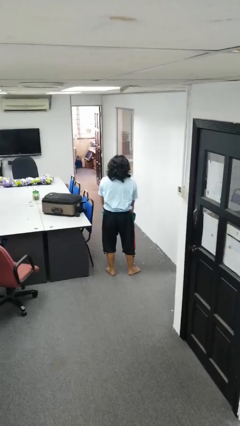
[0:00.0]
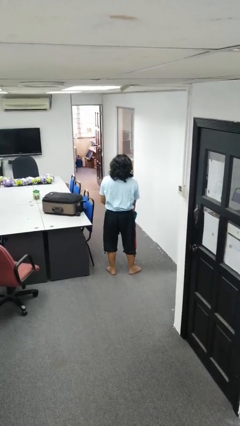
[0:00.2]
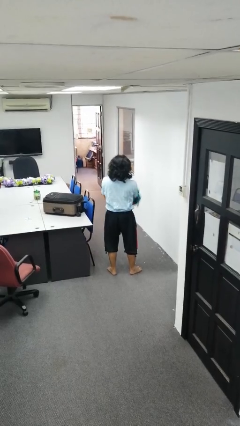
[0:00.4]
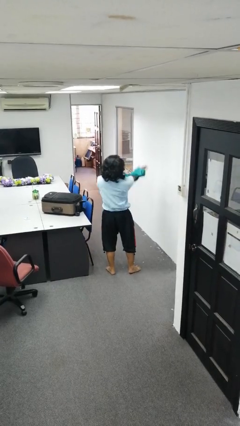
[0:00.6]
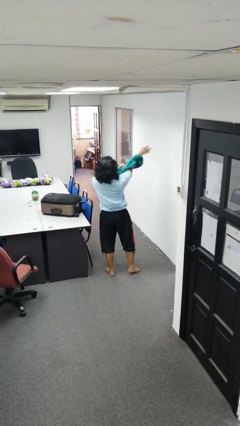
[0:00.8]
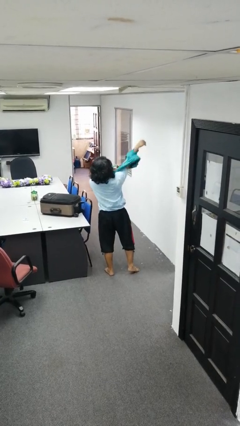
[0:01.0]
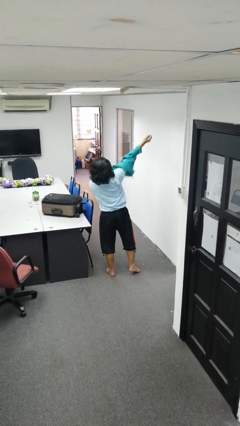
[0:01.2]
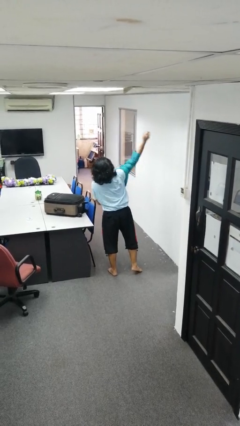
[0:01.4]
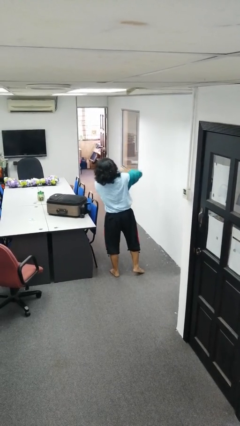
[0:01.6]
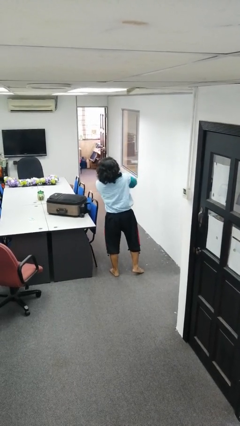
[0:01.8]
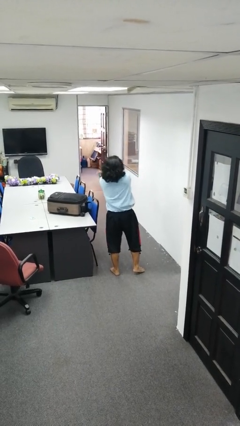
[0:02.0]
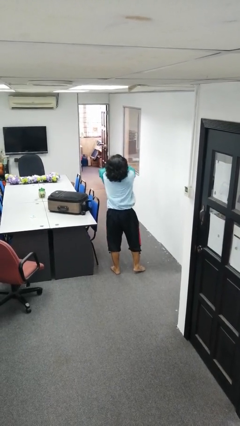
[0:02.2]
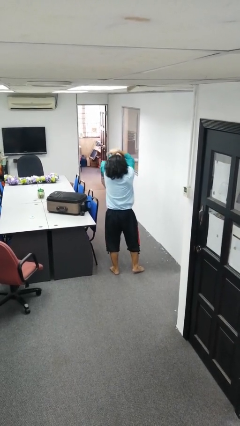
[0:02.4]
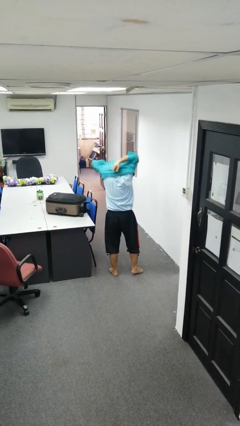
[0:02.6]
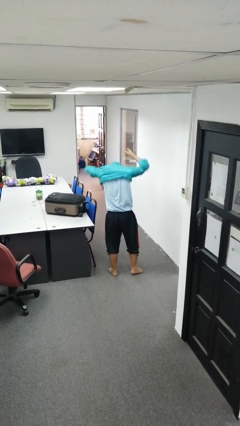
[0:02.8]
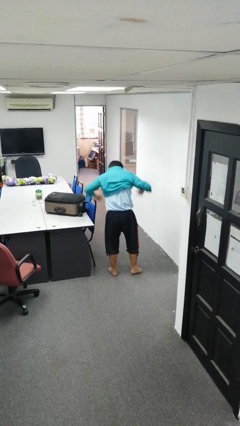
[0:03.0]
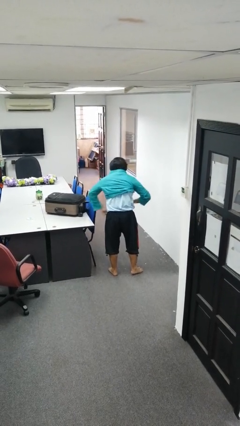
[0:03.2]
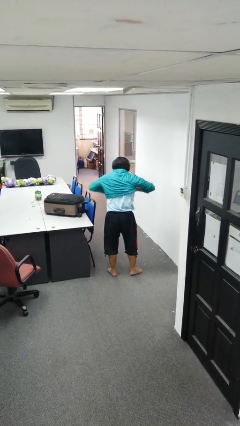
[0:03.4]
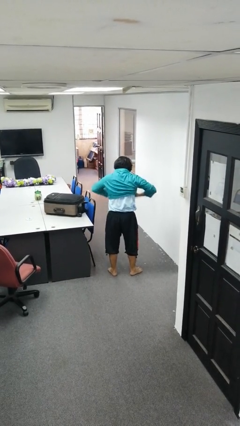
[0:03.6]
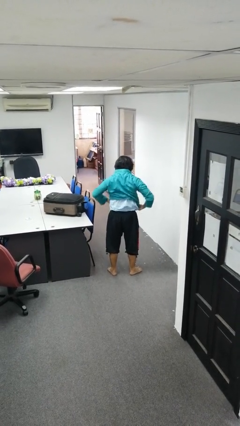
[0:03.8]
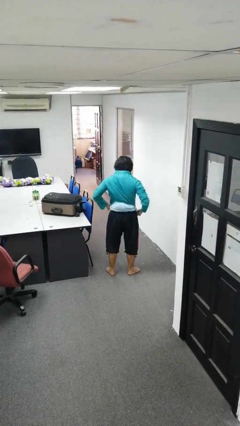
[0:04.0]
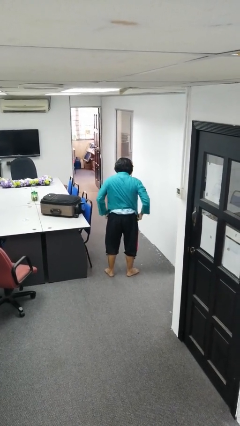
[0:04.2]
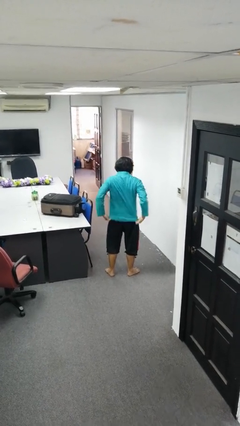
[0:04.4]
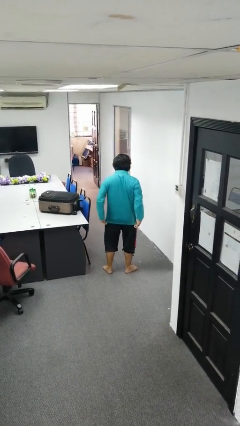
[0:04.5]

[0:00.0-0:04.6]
person puts on shirt

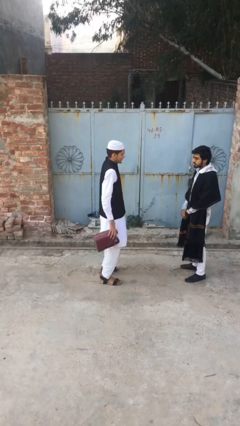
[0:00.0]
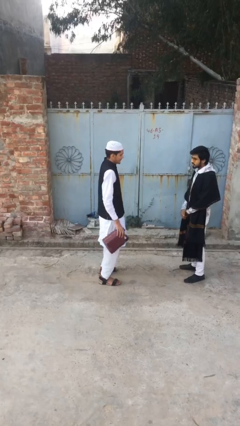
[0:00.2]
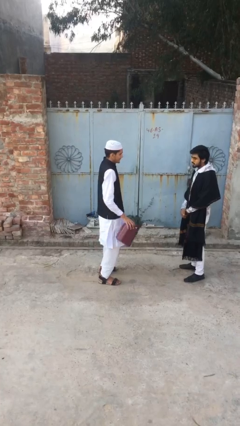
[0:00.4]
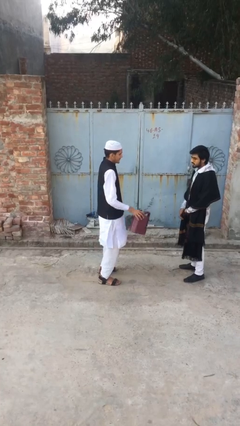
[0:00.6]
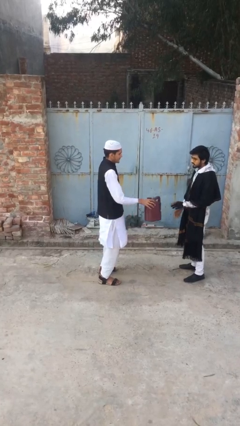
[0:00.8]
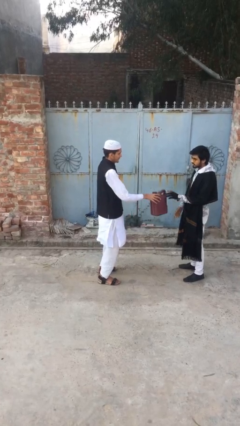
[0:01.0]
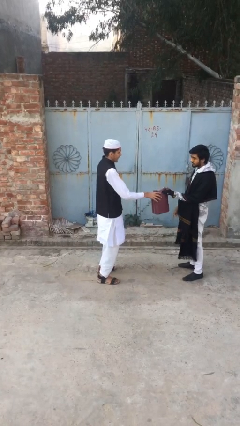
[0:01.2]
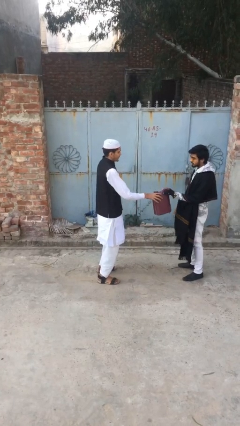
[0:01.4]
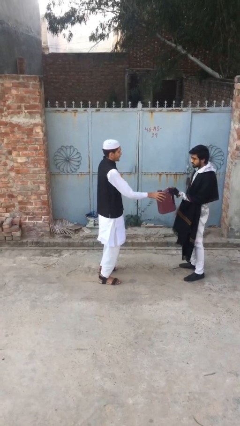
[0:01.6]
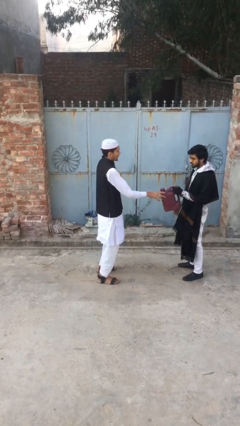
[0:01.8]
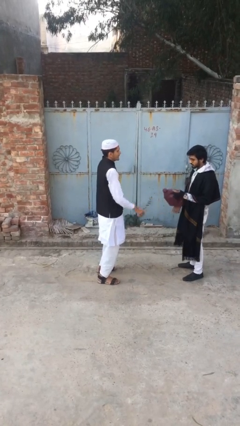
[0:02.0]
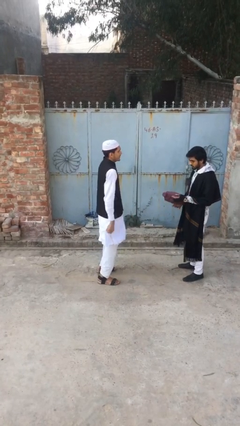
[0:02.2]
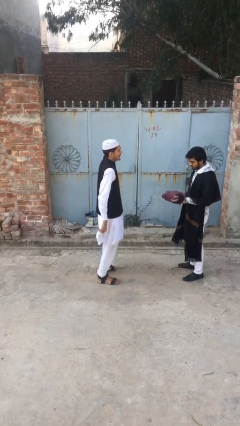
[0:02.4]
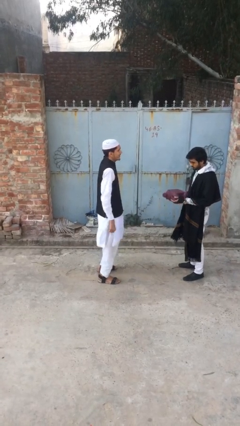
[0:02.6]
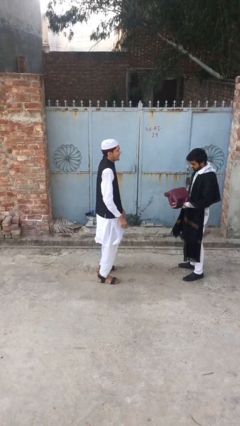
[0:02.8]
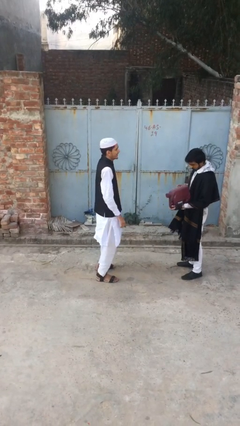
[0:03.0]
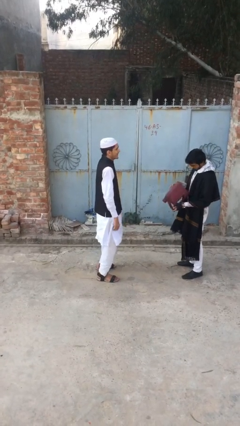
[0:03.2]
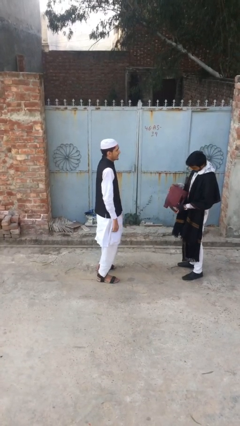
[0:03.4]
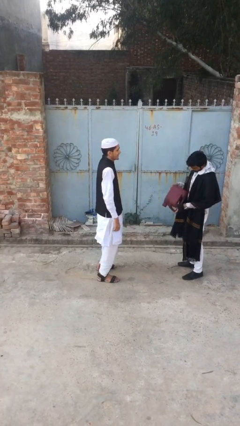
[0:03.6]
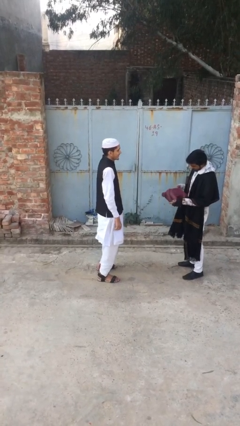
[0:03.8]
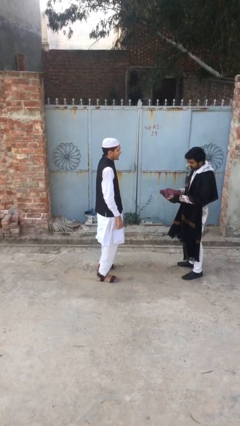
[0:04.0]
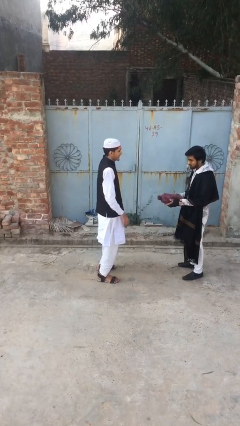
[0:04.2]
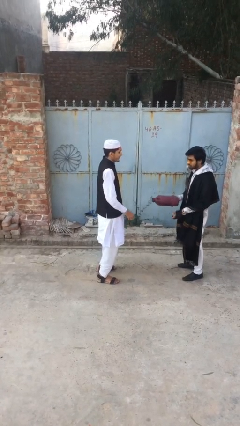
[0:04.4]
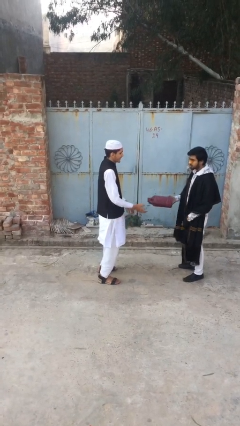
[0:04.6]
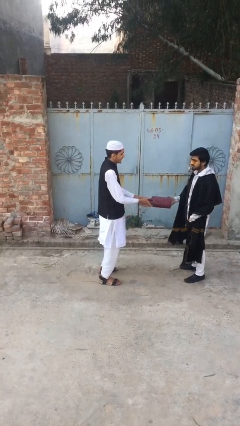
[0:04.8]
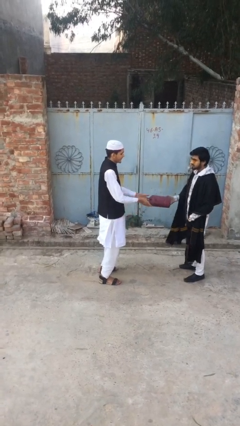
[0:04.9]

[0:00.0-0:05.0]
person transfers object to person

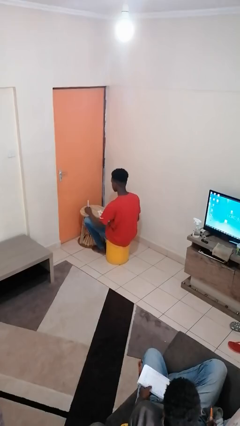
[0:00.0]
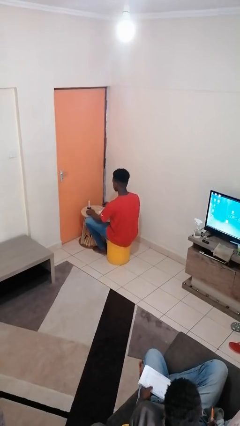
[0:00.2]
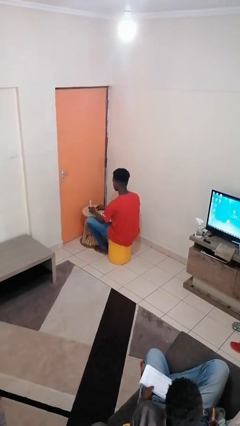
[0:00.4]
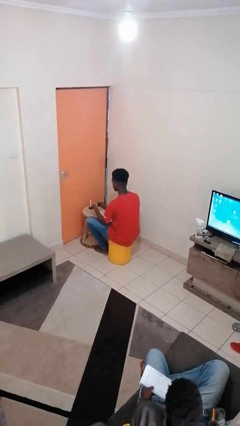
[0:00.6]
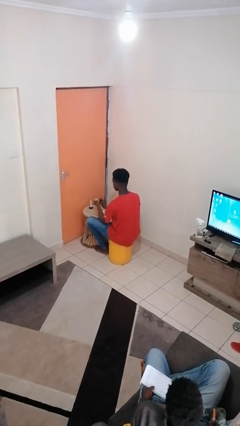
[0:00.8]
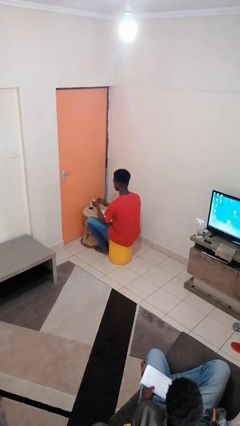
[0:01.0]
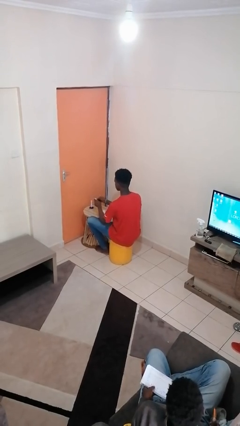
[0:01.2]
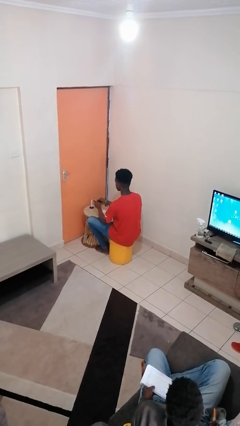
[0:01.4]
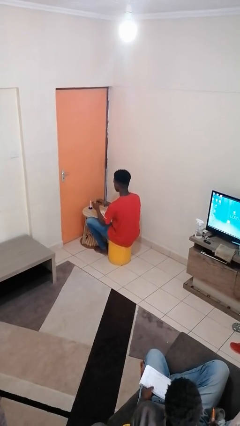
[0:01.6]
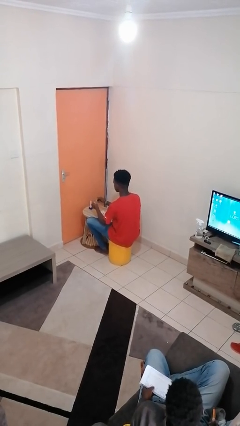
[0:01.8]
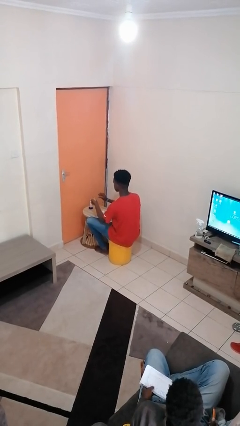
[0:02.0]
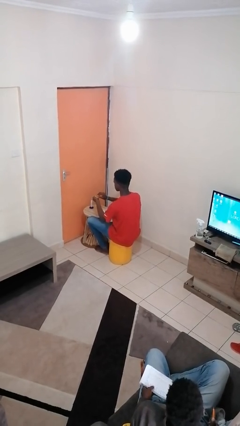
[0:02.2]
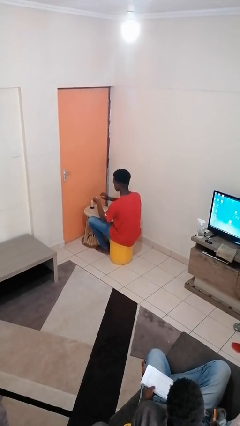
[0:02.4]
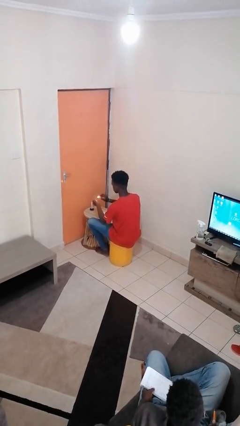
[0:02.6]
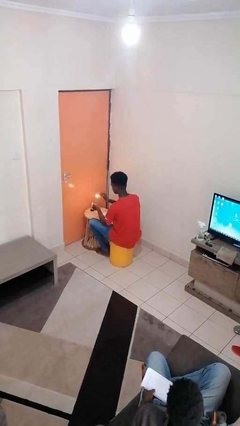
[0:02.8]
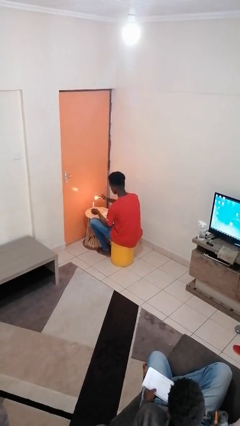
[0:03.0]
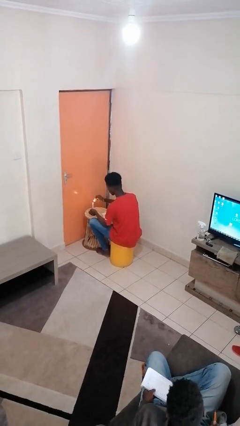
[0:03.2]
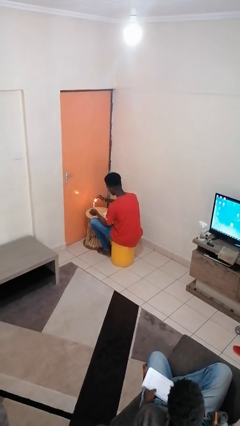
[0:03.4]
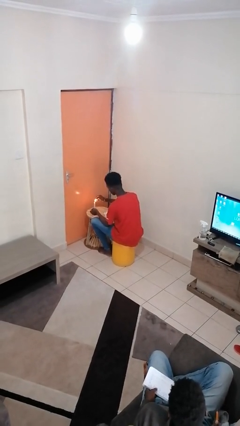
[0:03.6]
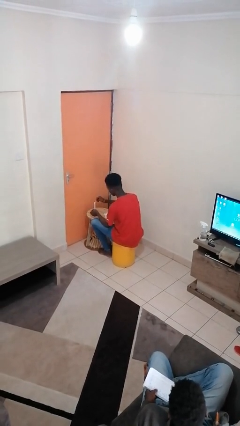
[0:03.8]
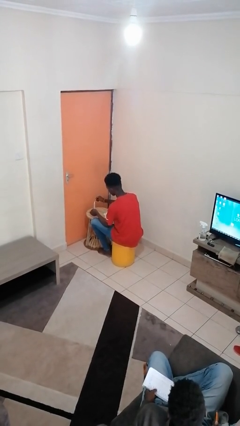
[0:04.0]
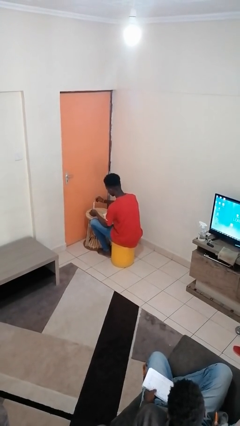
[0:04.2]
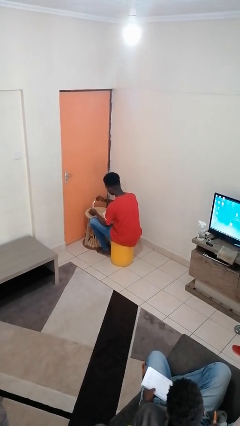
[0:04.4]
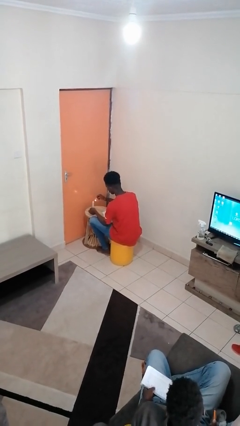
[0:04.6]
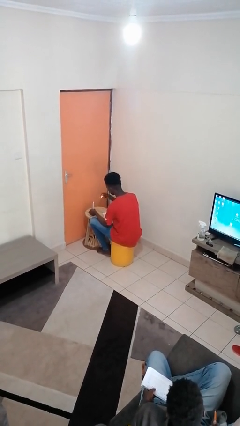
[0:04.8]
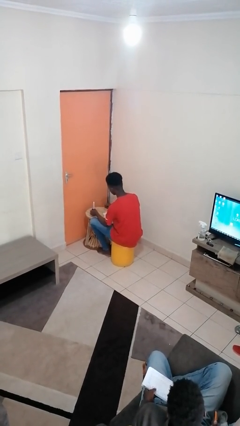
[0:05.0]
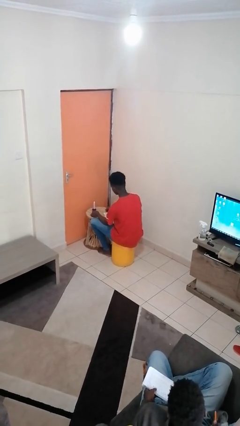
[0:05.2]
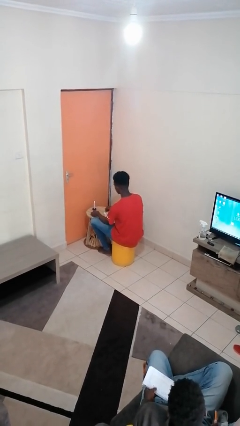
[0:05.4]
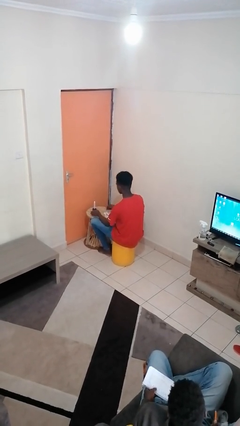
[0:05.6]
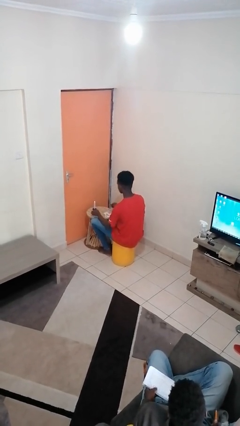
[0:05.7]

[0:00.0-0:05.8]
person lights candle

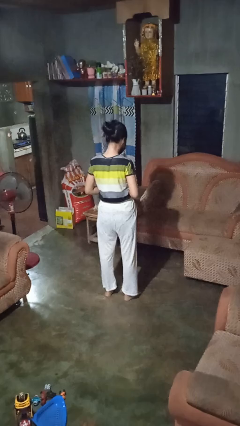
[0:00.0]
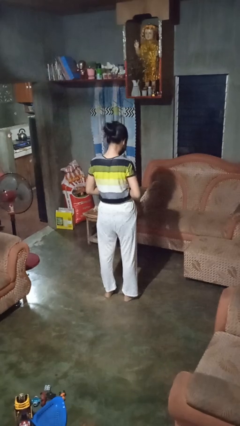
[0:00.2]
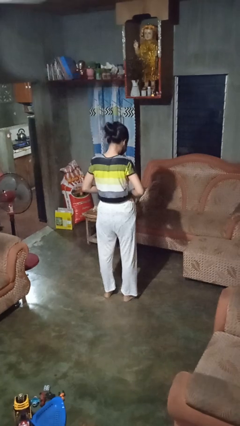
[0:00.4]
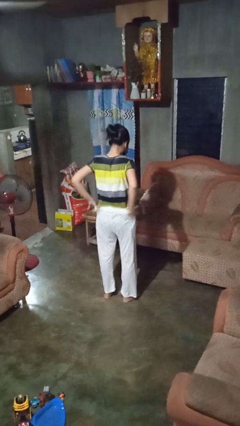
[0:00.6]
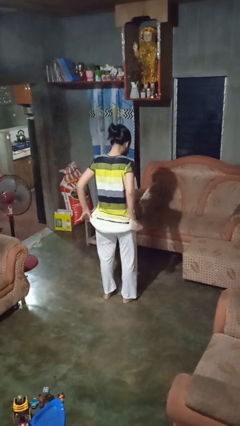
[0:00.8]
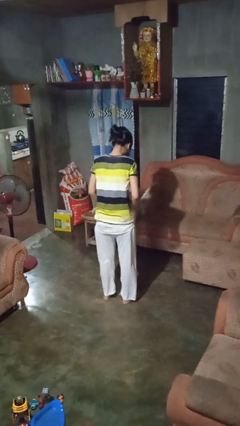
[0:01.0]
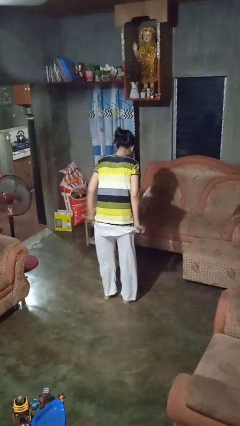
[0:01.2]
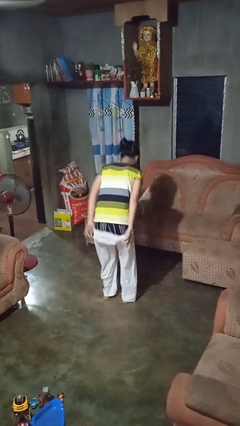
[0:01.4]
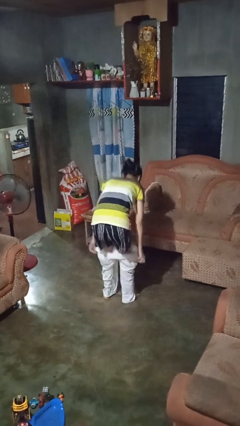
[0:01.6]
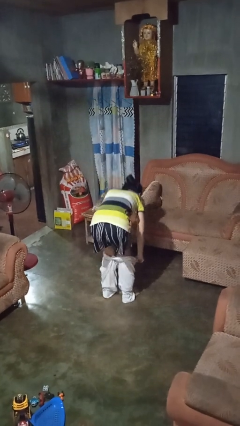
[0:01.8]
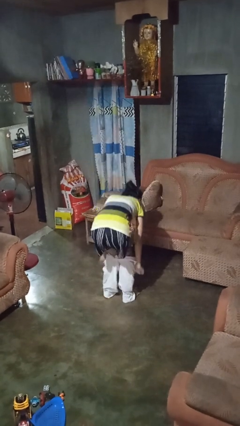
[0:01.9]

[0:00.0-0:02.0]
person takes off pants
